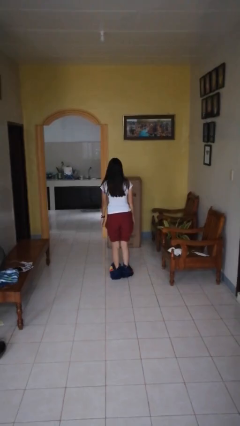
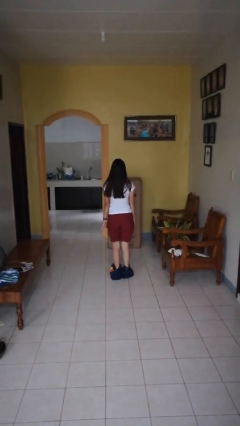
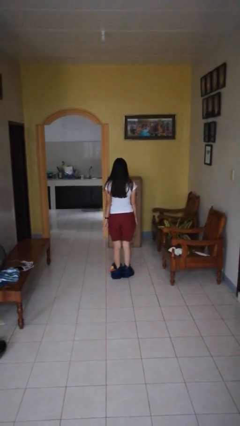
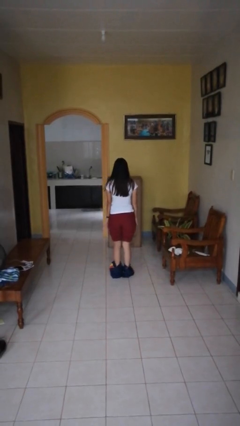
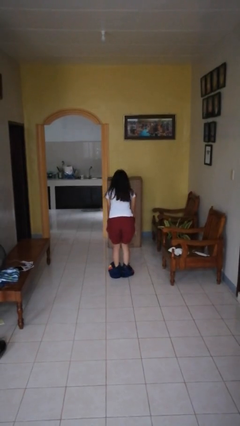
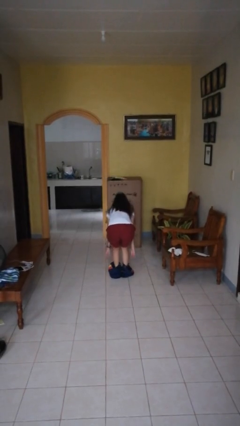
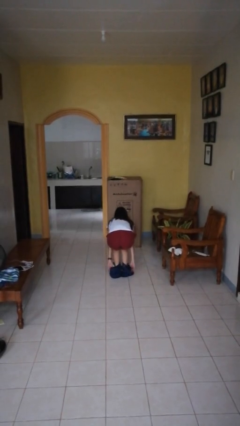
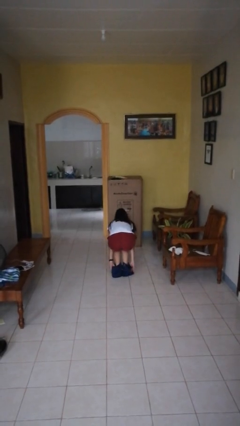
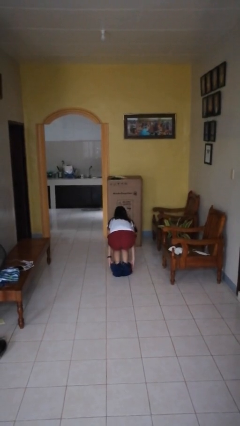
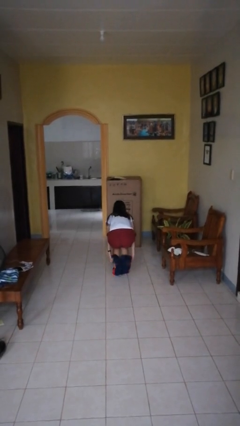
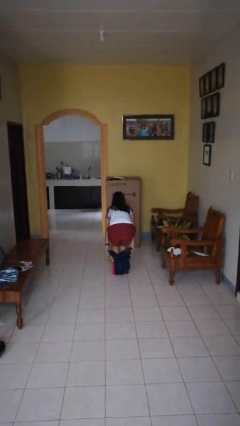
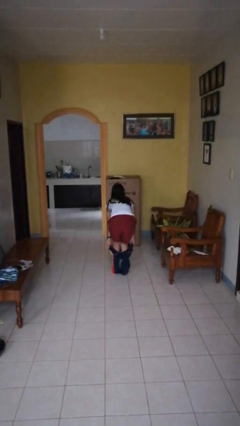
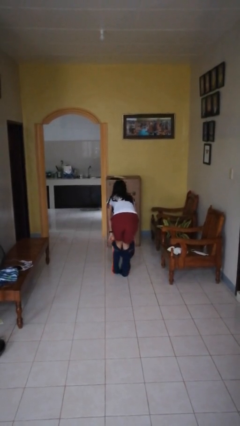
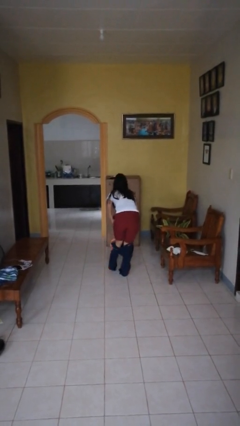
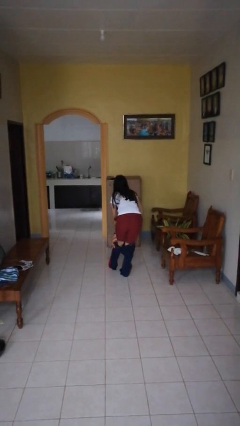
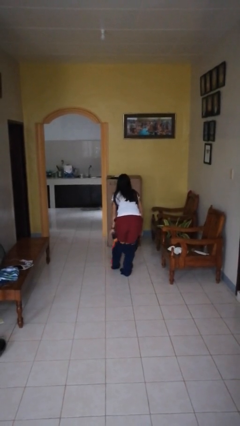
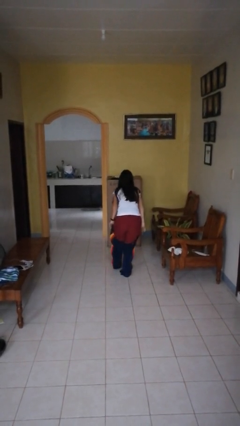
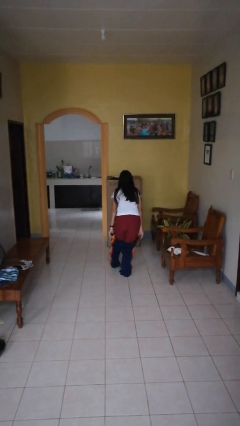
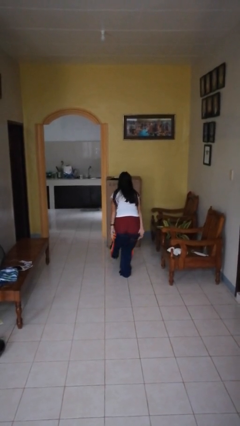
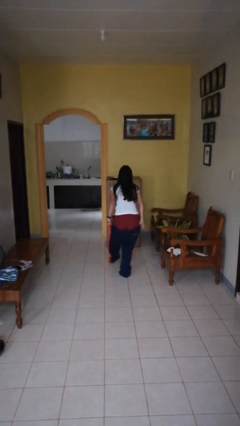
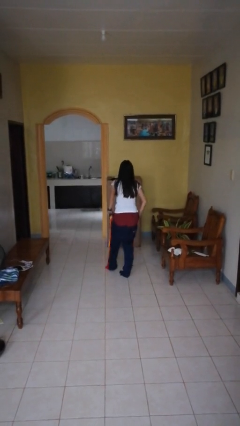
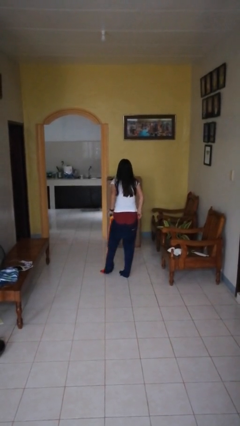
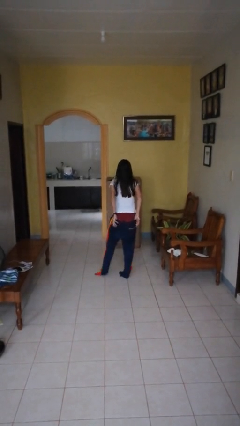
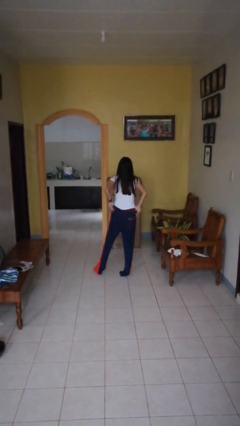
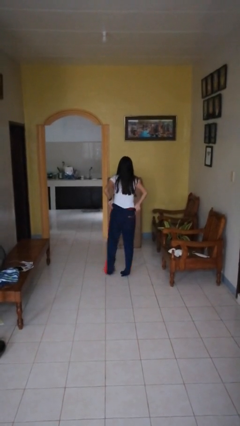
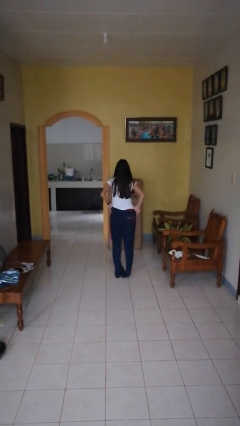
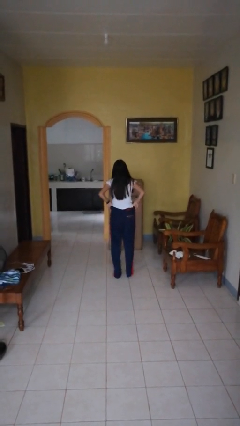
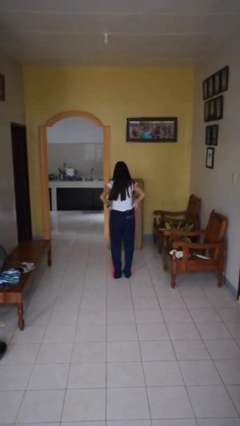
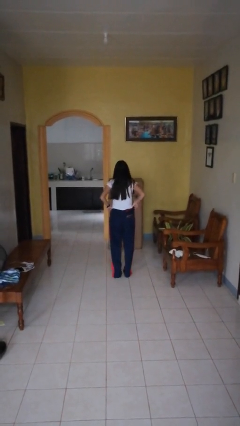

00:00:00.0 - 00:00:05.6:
person puts on pants

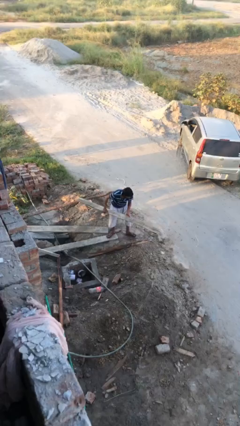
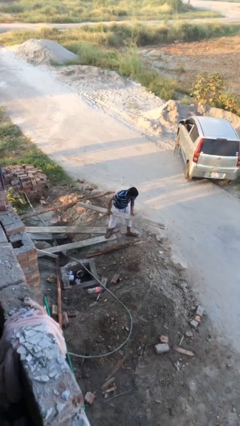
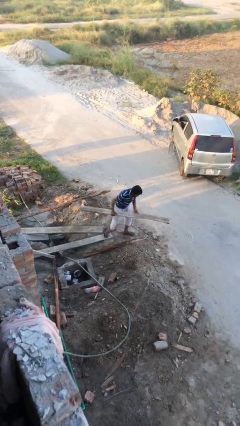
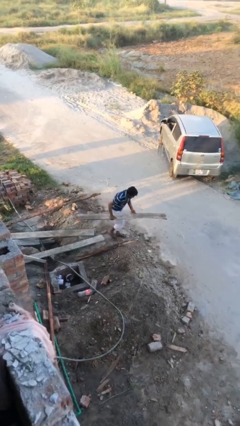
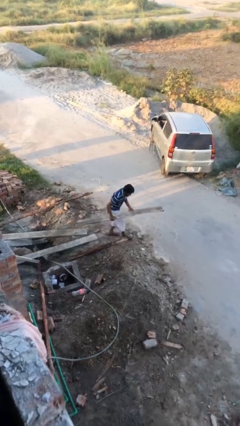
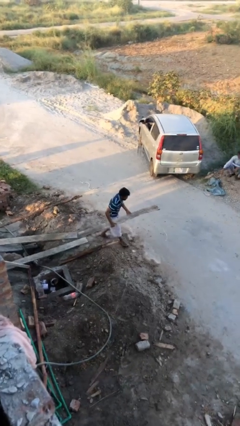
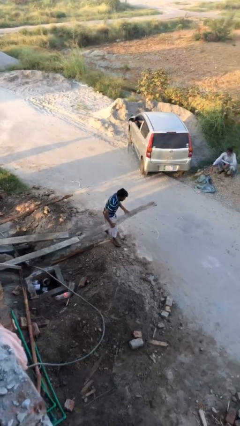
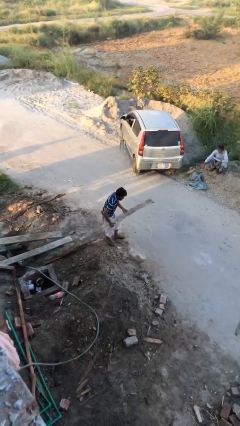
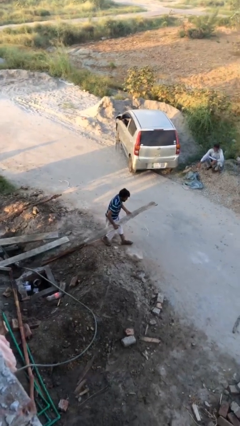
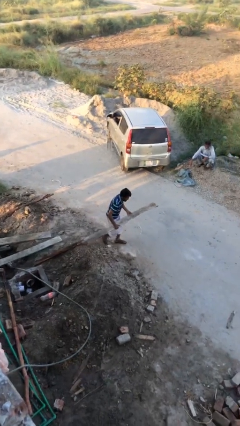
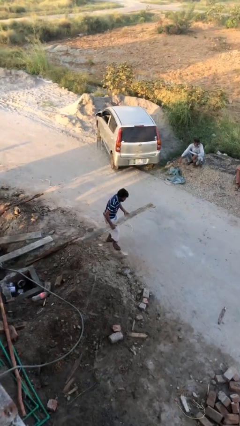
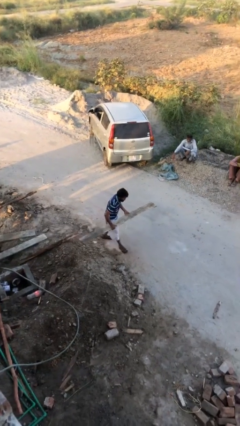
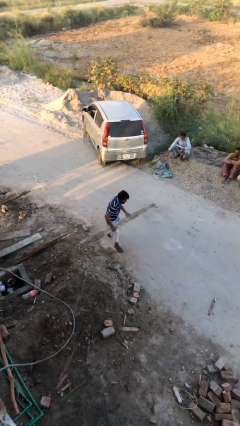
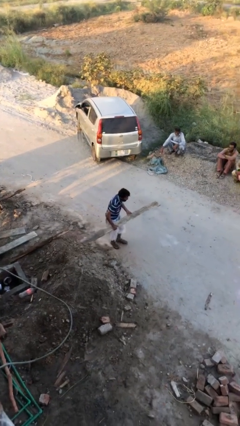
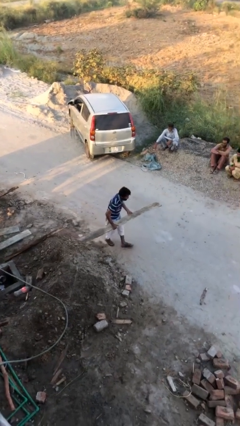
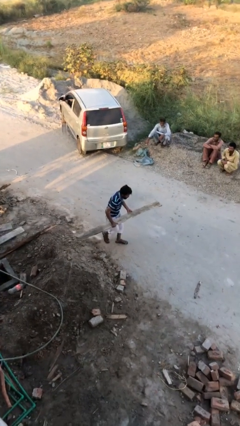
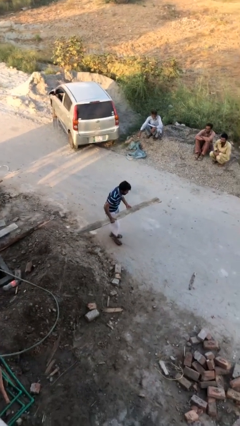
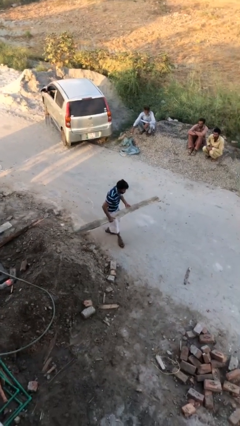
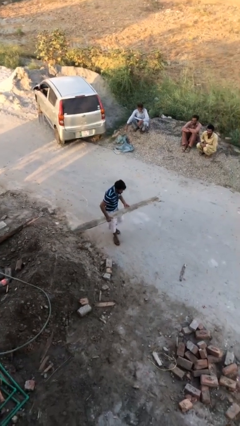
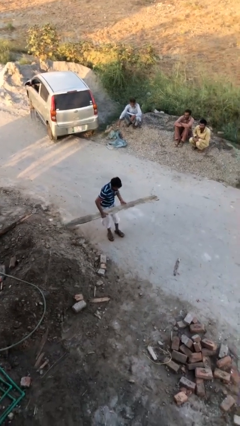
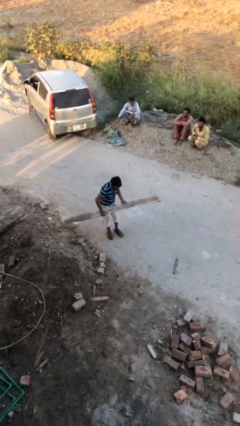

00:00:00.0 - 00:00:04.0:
person carries heavy object

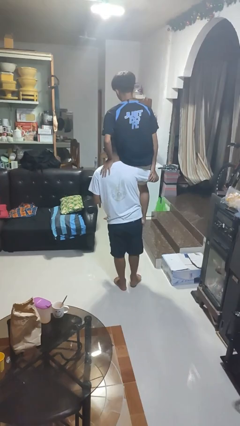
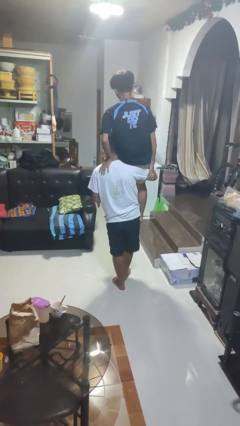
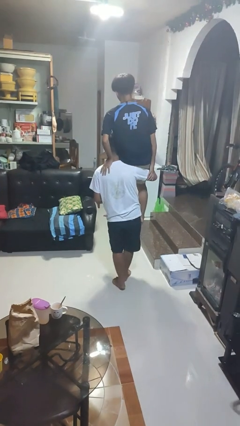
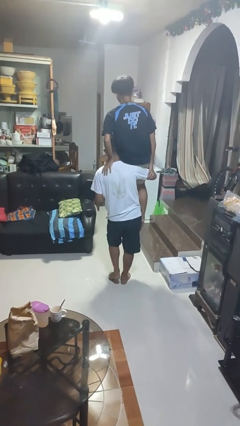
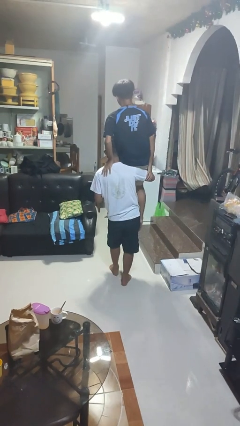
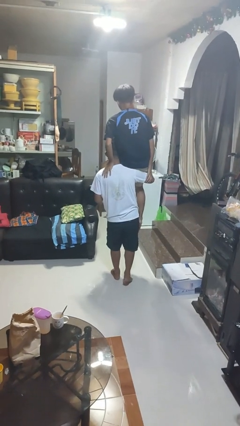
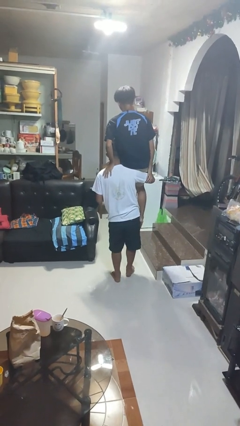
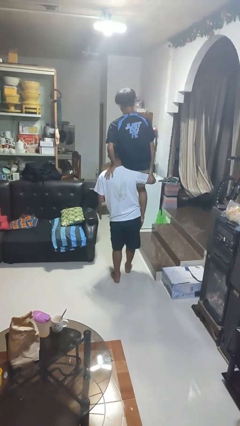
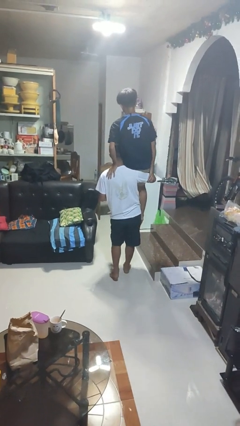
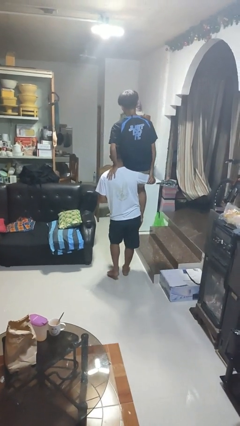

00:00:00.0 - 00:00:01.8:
person carries person on shoulders

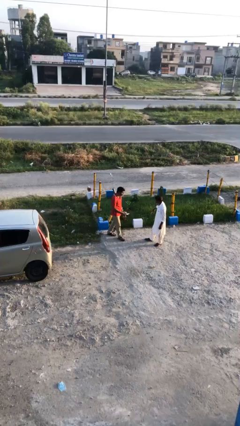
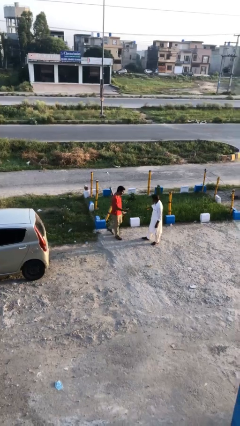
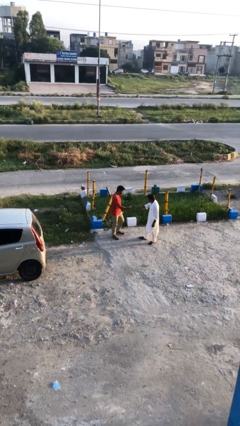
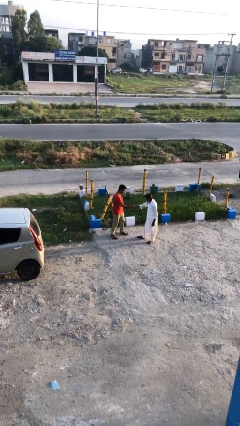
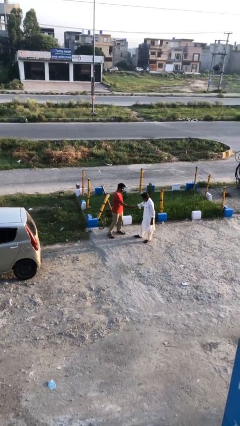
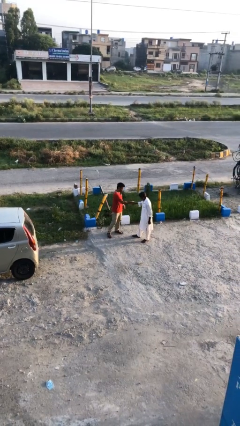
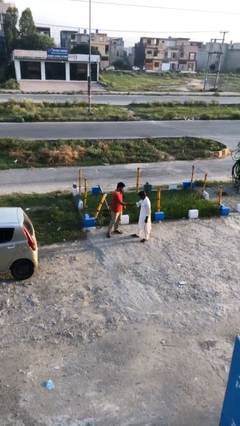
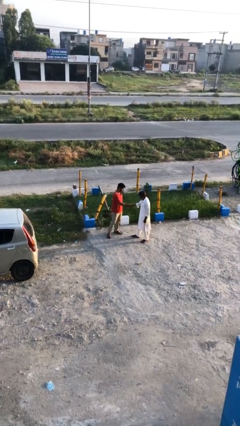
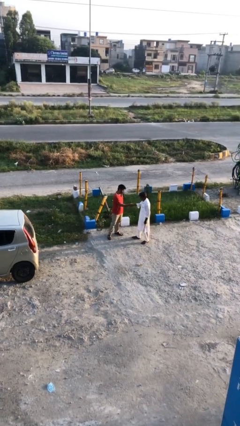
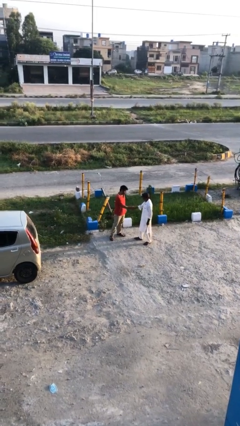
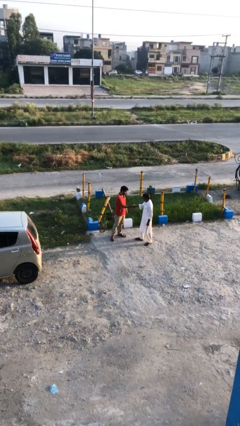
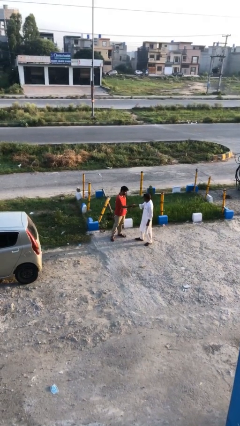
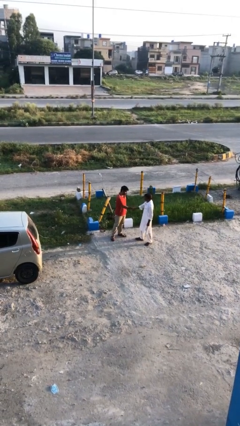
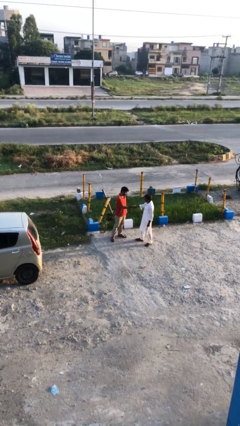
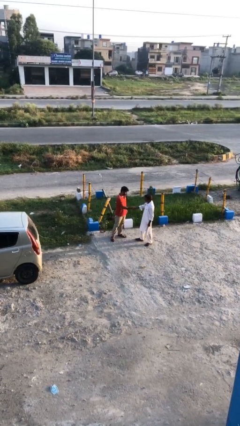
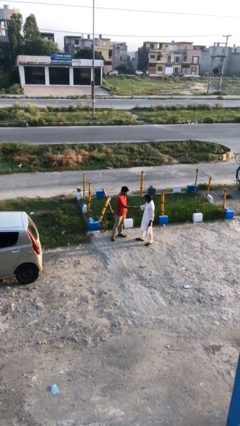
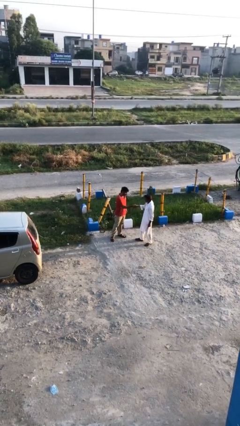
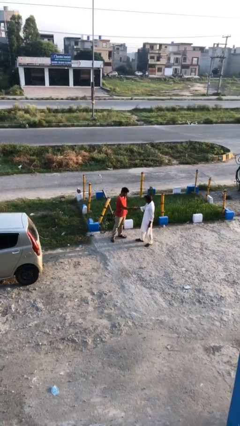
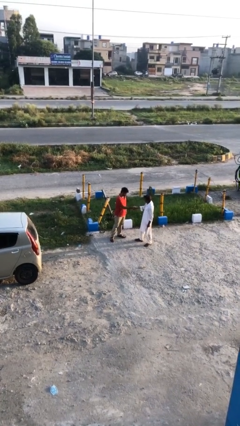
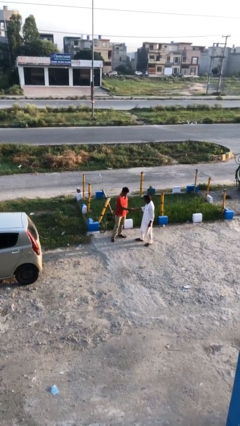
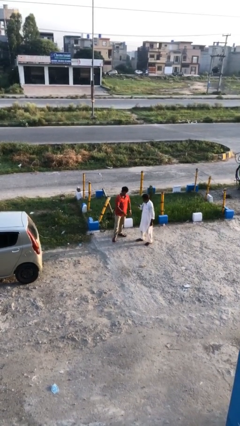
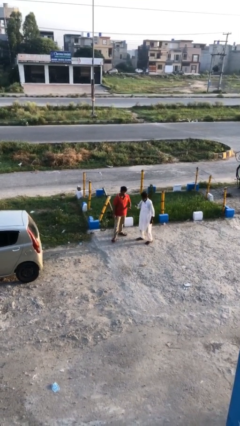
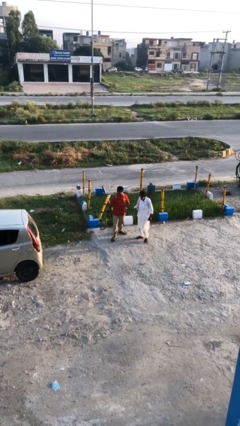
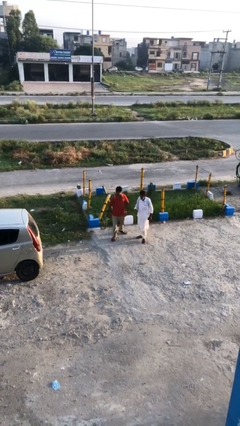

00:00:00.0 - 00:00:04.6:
person shakes hand

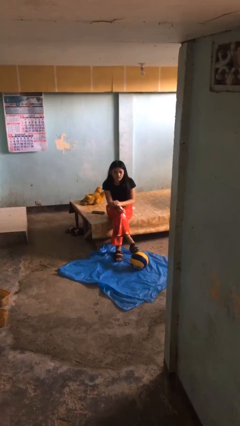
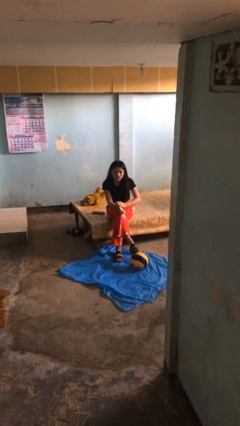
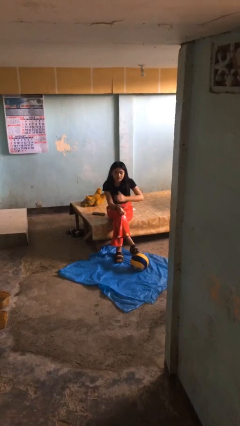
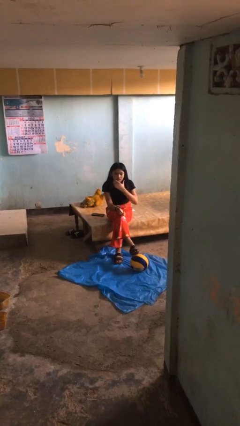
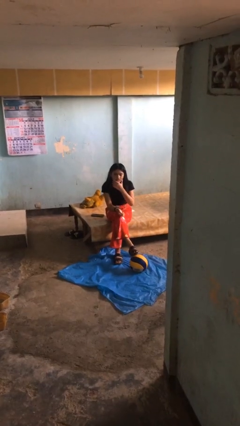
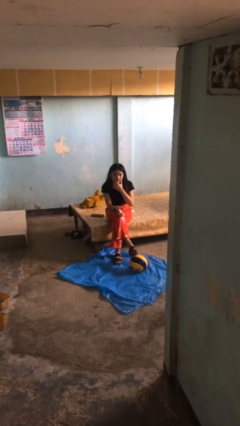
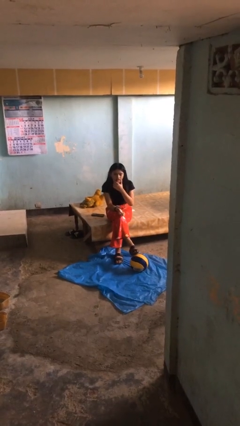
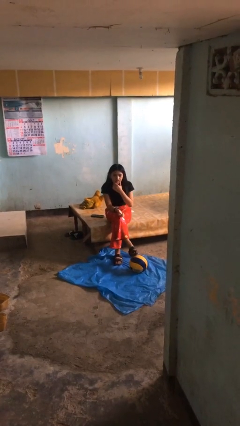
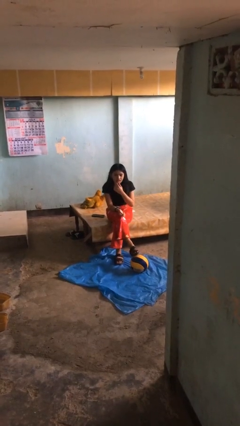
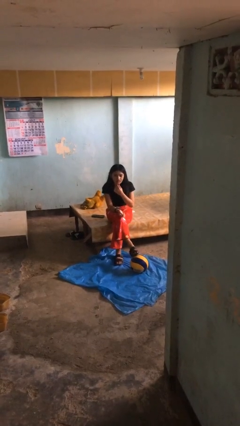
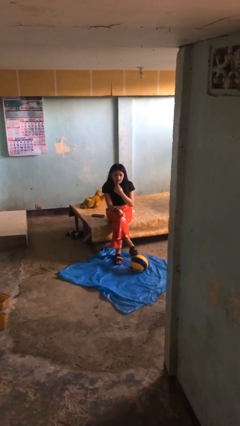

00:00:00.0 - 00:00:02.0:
person strokes chin
